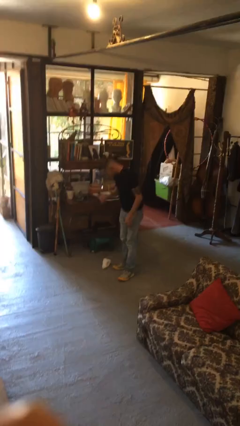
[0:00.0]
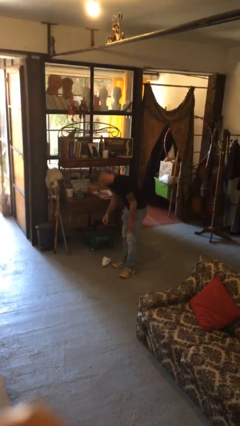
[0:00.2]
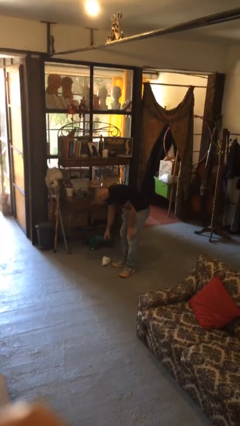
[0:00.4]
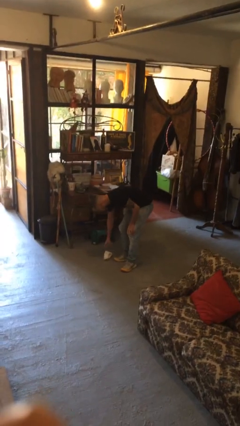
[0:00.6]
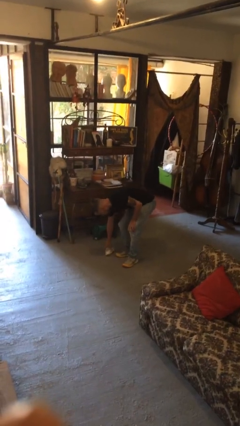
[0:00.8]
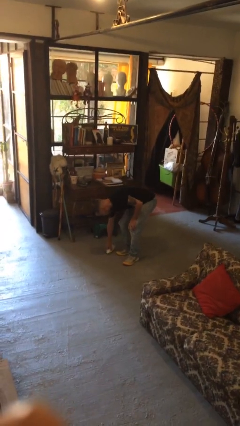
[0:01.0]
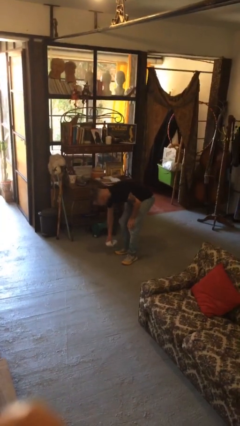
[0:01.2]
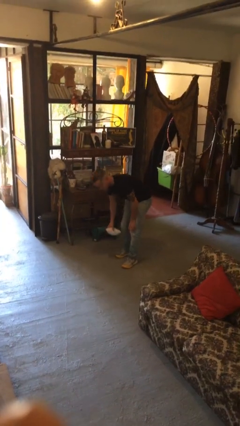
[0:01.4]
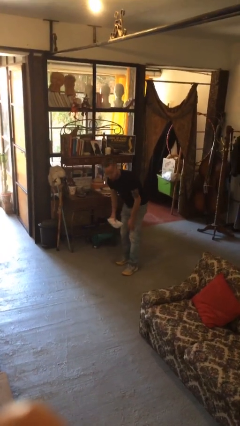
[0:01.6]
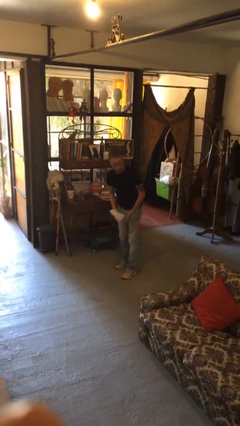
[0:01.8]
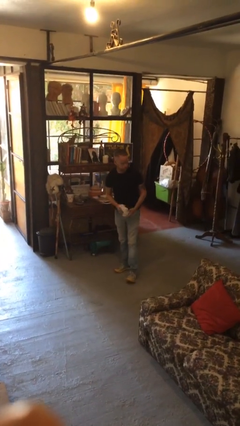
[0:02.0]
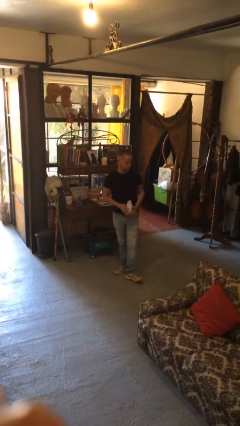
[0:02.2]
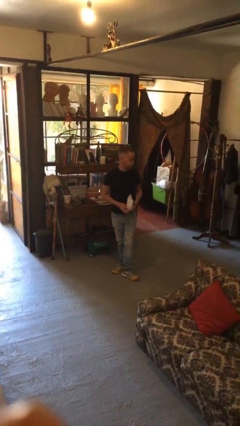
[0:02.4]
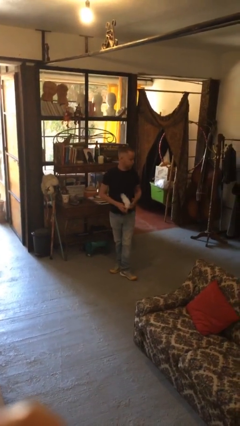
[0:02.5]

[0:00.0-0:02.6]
person picks up object from floor

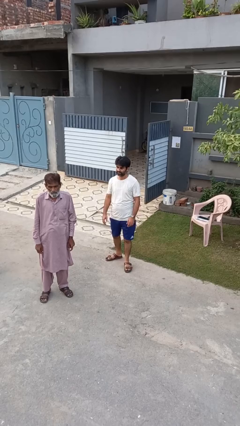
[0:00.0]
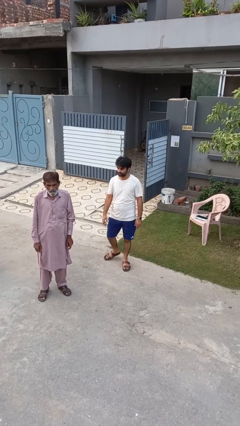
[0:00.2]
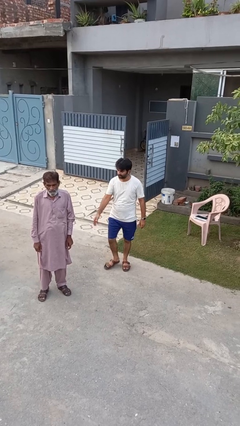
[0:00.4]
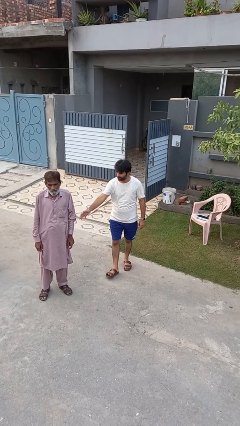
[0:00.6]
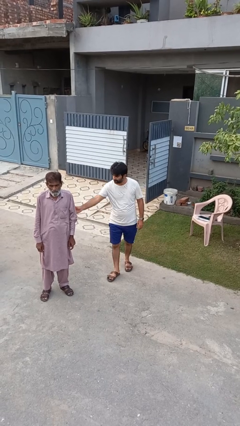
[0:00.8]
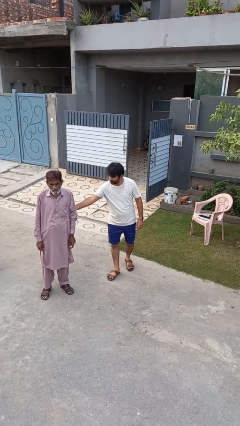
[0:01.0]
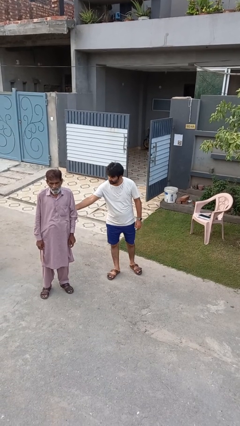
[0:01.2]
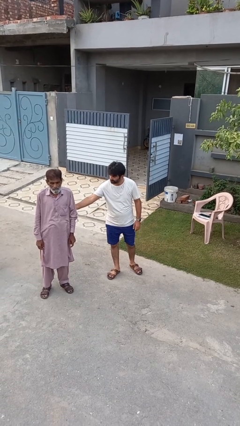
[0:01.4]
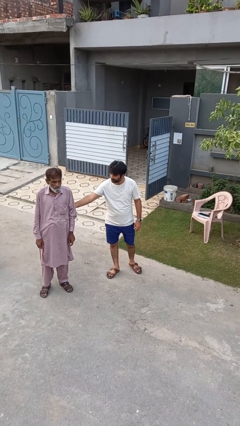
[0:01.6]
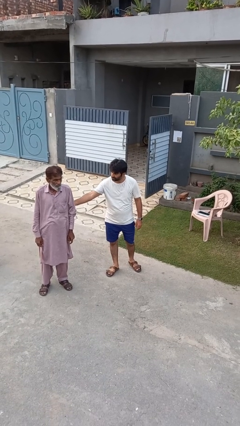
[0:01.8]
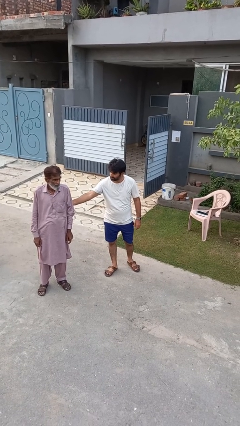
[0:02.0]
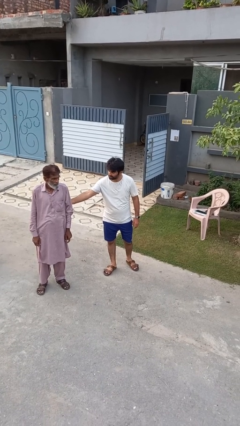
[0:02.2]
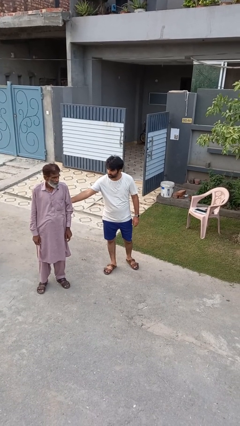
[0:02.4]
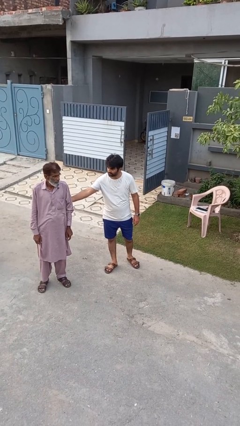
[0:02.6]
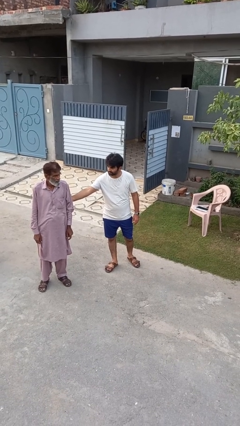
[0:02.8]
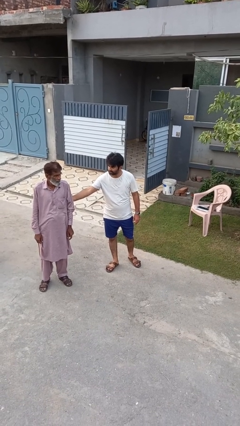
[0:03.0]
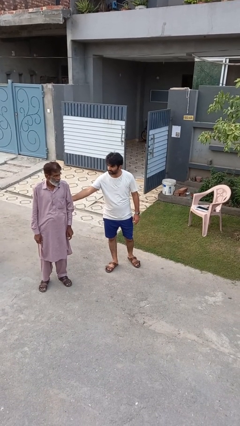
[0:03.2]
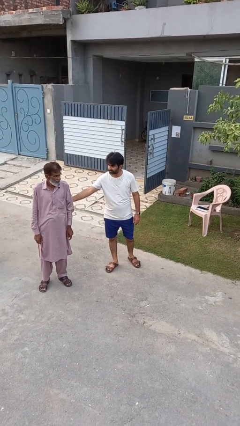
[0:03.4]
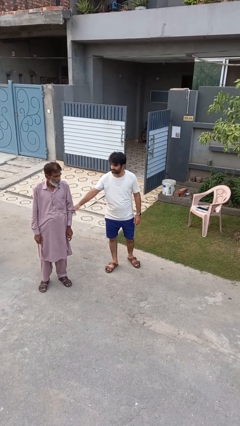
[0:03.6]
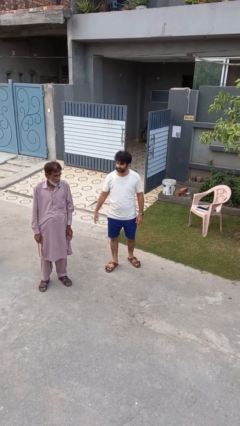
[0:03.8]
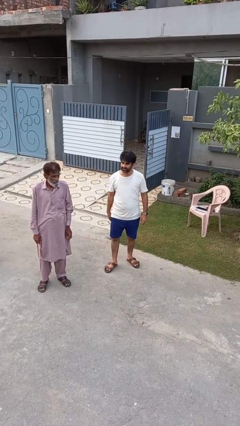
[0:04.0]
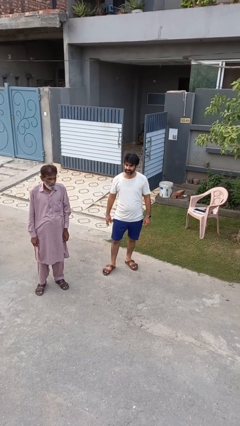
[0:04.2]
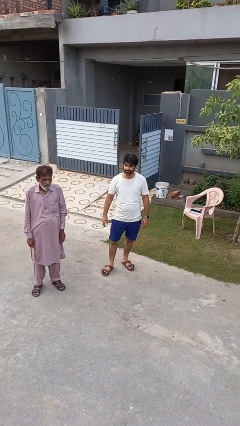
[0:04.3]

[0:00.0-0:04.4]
person touches back of person

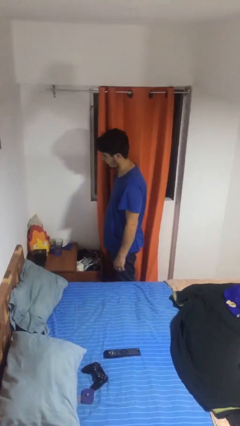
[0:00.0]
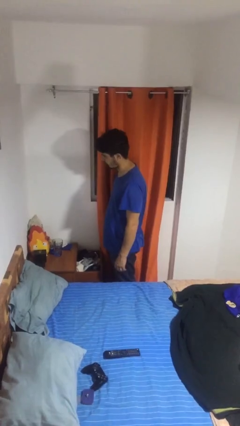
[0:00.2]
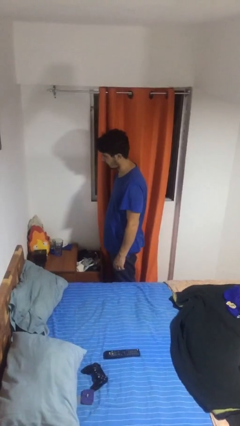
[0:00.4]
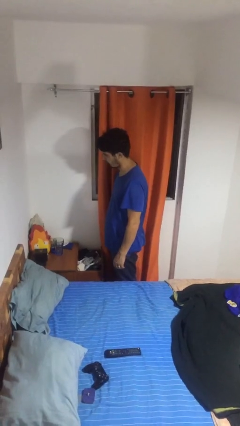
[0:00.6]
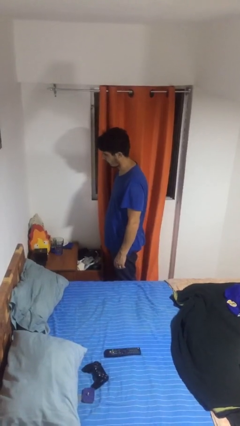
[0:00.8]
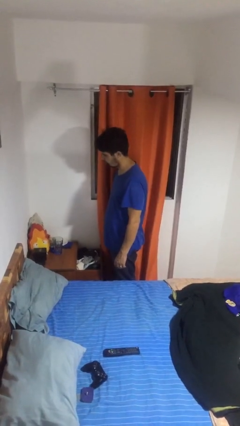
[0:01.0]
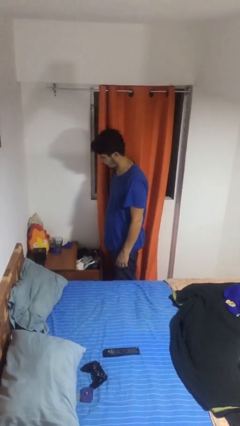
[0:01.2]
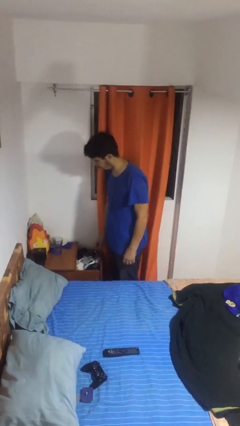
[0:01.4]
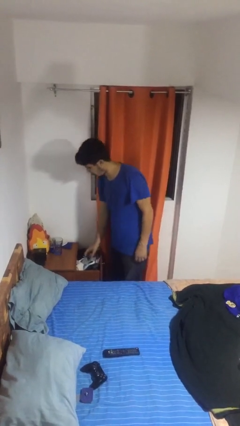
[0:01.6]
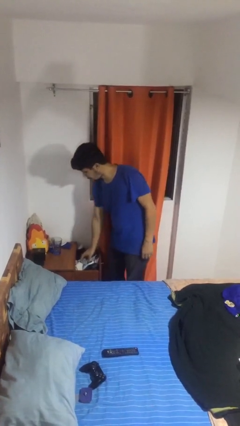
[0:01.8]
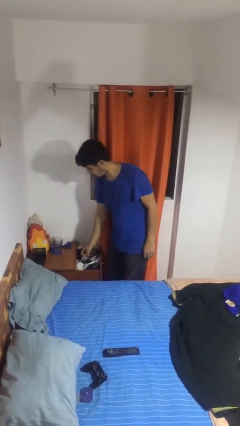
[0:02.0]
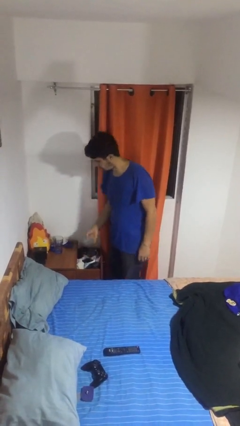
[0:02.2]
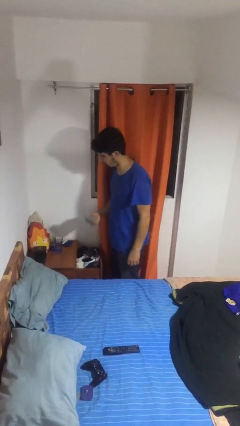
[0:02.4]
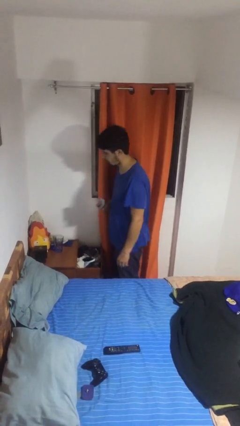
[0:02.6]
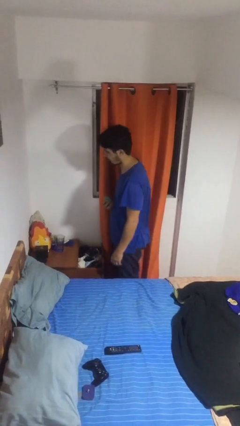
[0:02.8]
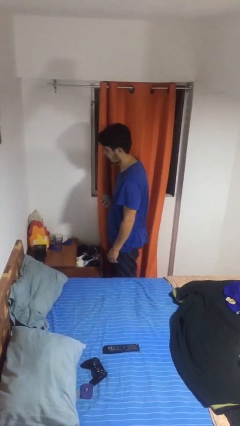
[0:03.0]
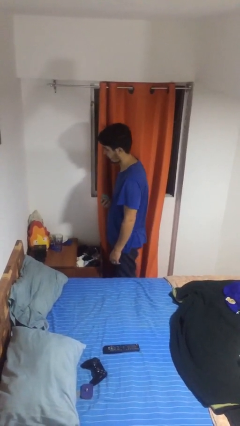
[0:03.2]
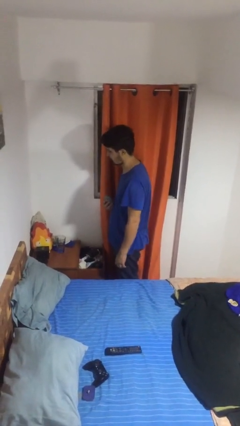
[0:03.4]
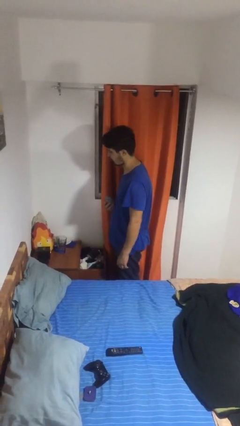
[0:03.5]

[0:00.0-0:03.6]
person takes clothes from dresser

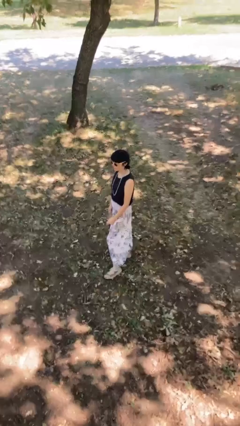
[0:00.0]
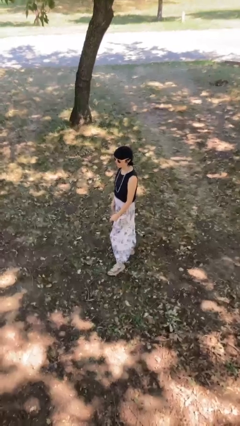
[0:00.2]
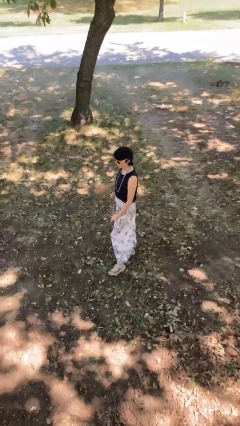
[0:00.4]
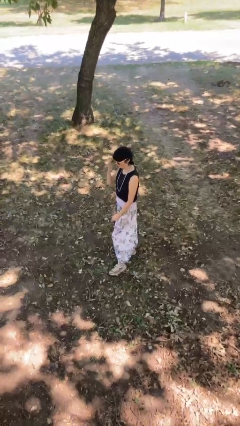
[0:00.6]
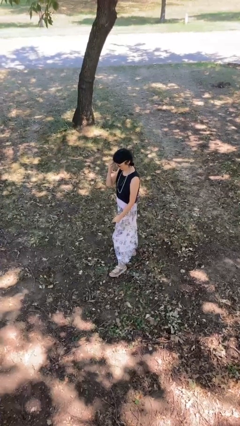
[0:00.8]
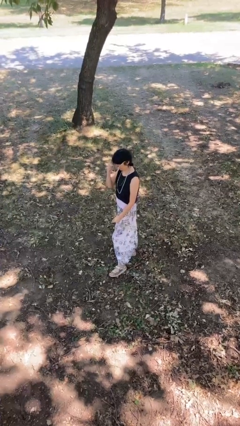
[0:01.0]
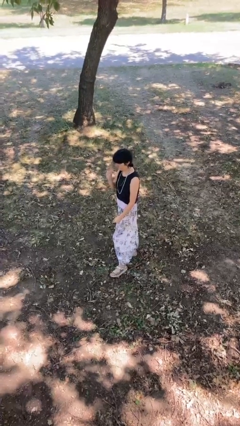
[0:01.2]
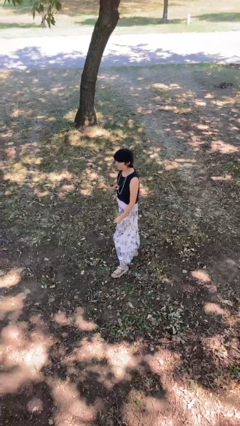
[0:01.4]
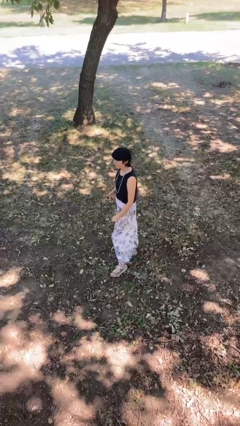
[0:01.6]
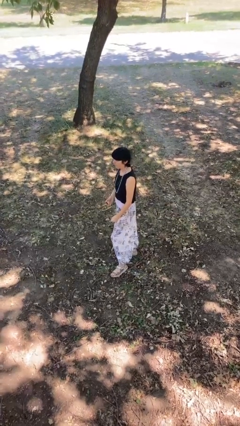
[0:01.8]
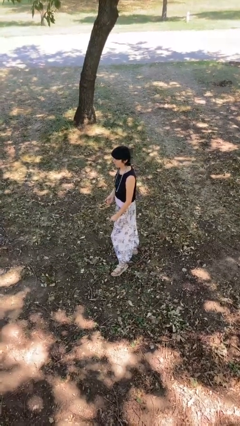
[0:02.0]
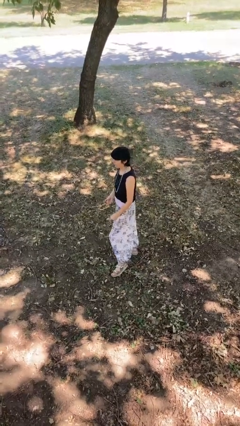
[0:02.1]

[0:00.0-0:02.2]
person takes off sunglasses

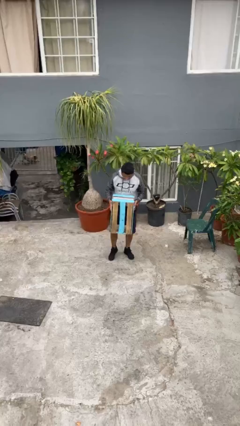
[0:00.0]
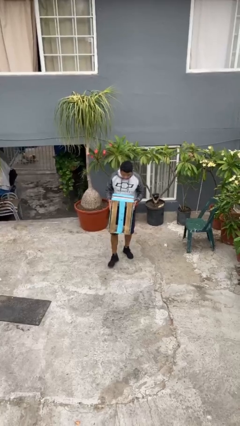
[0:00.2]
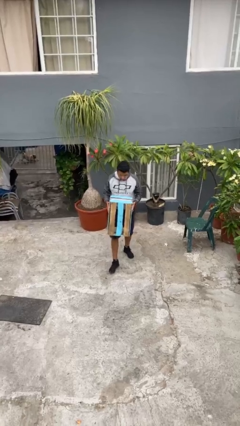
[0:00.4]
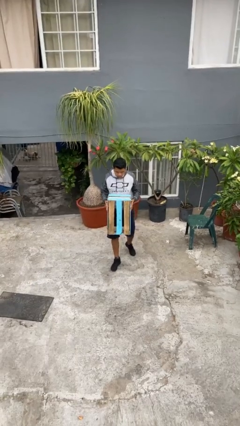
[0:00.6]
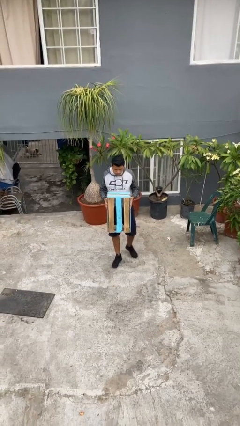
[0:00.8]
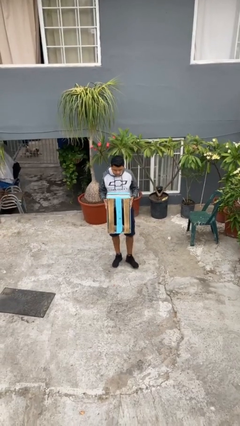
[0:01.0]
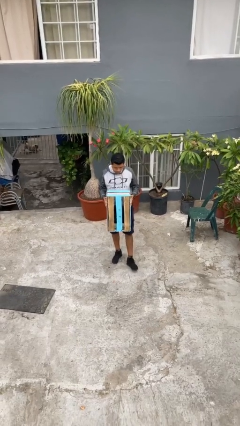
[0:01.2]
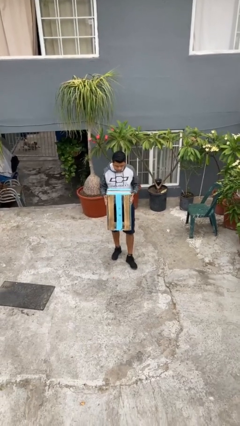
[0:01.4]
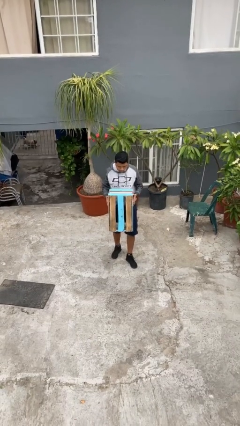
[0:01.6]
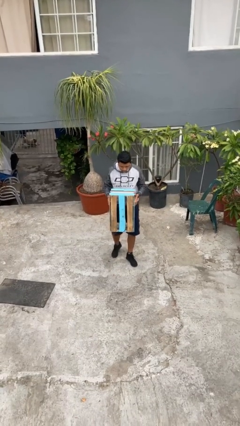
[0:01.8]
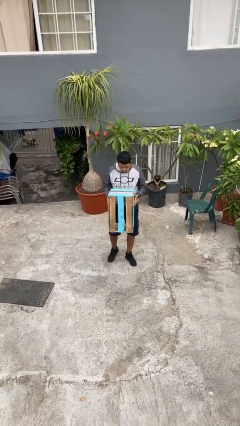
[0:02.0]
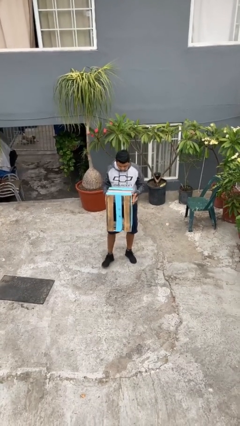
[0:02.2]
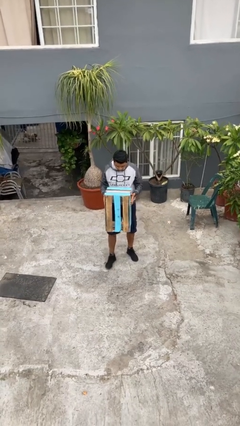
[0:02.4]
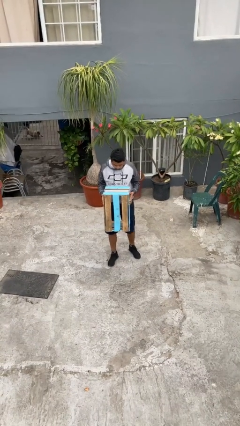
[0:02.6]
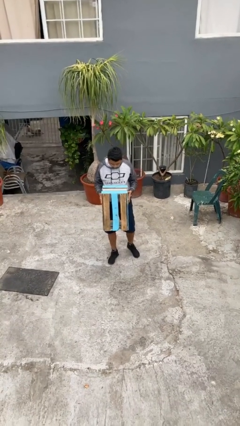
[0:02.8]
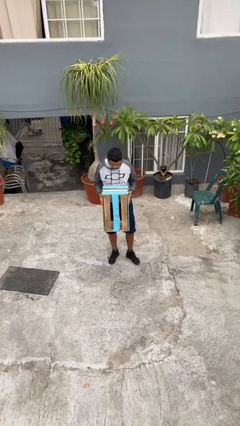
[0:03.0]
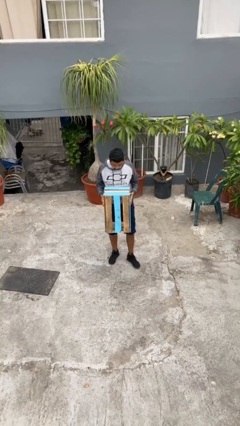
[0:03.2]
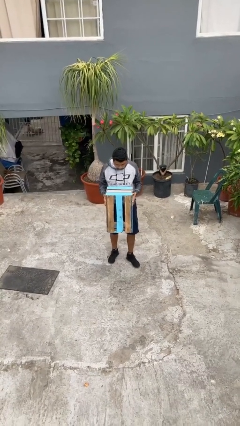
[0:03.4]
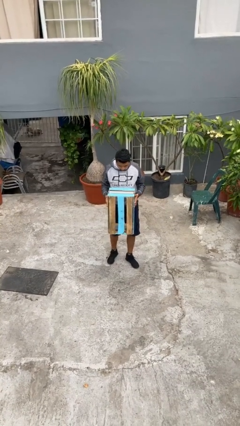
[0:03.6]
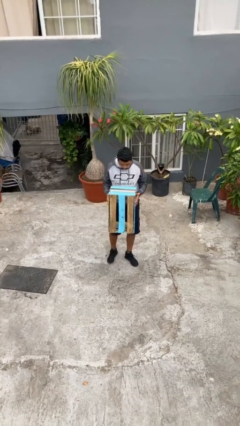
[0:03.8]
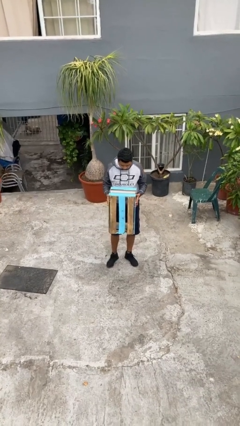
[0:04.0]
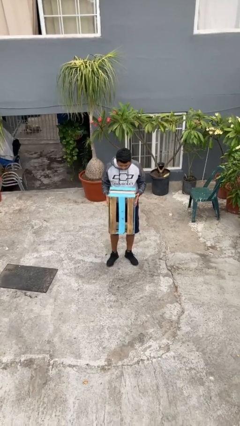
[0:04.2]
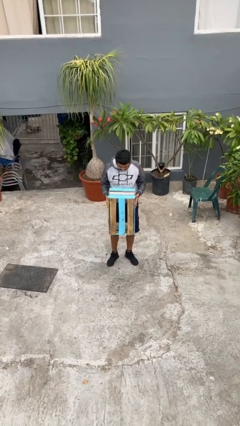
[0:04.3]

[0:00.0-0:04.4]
person carries heavy object

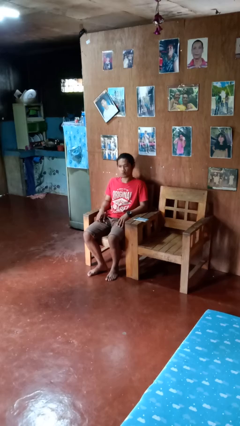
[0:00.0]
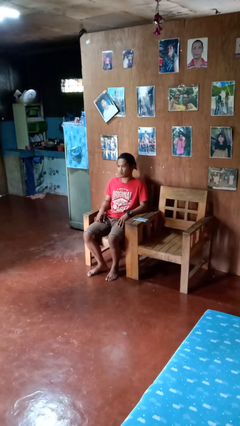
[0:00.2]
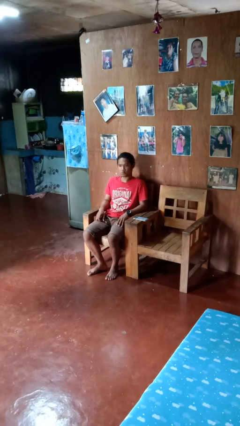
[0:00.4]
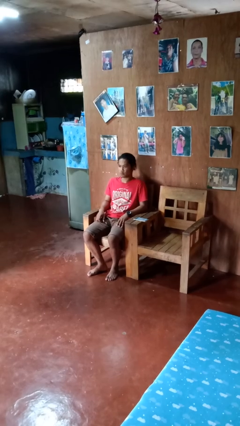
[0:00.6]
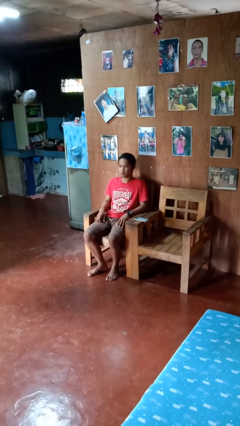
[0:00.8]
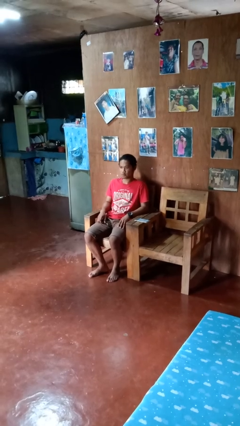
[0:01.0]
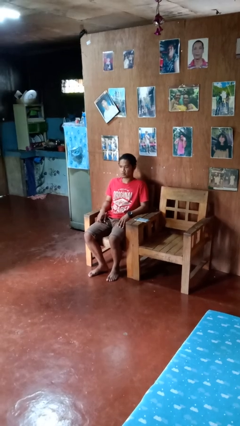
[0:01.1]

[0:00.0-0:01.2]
person shakes head
